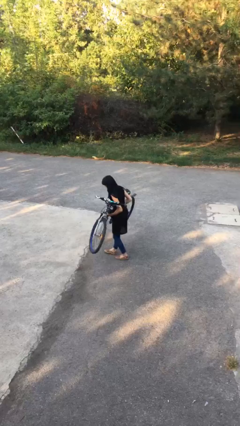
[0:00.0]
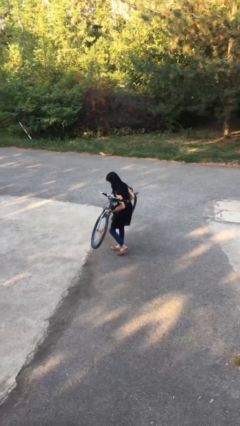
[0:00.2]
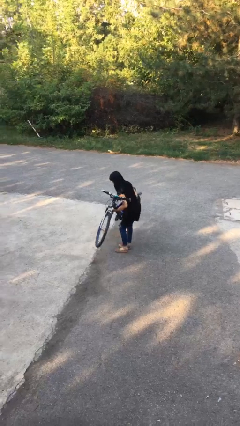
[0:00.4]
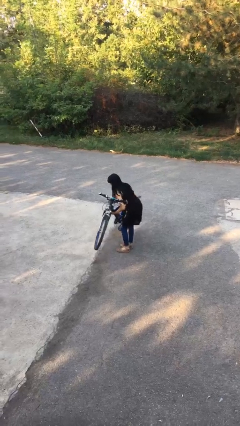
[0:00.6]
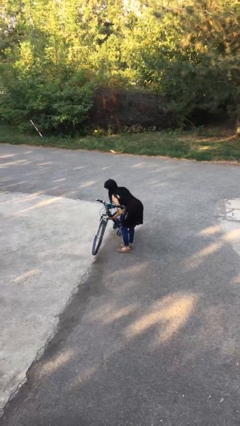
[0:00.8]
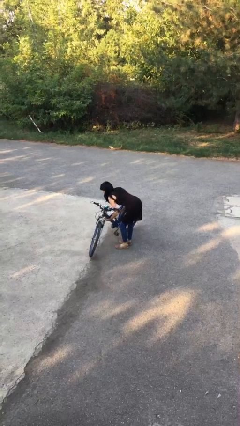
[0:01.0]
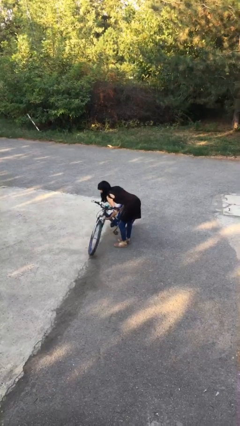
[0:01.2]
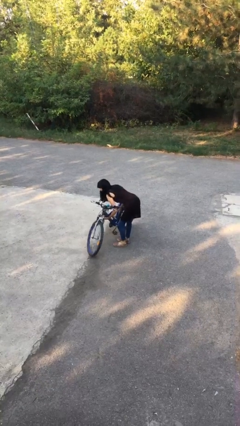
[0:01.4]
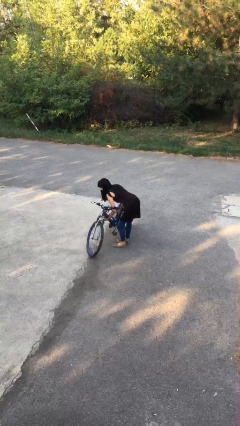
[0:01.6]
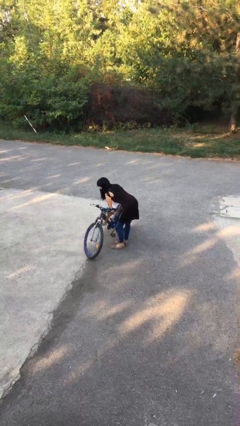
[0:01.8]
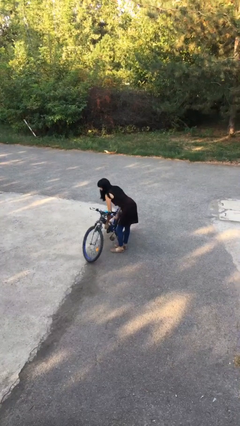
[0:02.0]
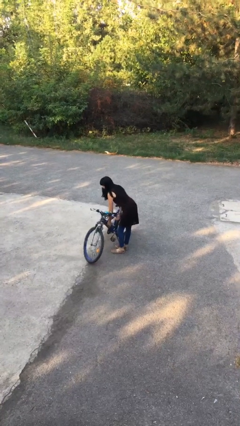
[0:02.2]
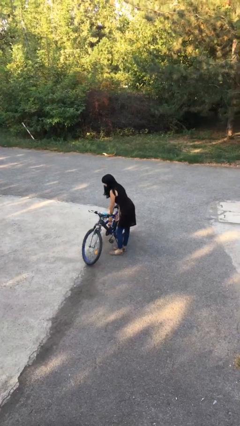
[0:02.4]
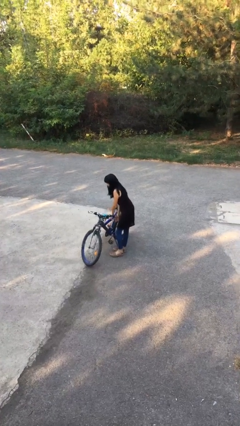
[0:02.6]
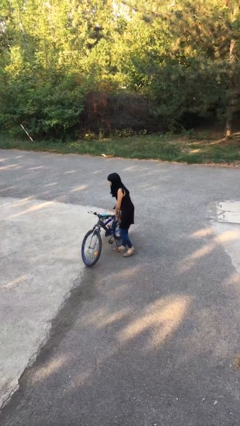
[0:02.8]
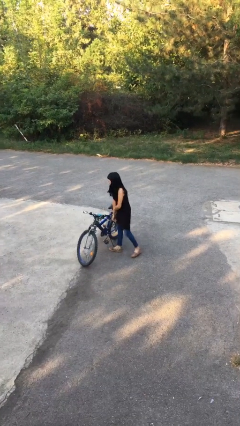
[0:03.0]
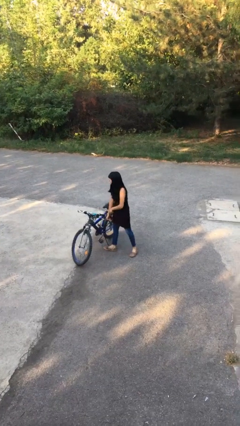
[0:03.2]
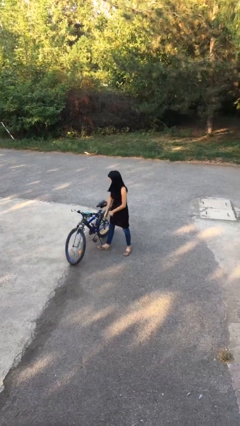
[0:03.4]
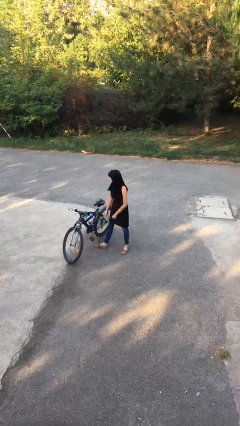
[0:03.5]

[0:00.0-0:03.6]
person puts down object on floor

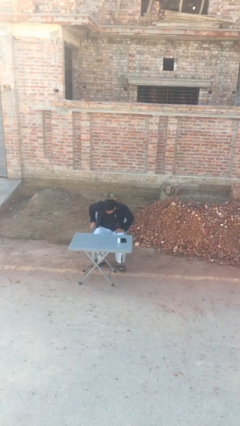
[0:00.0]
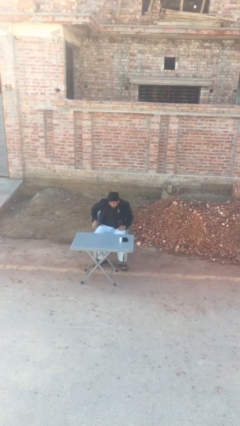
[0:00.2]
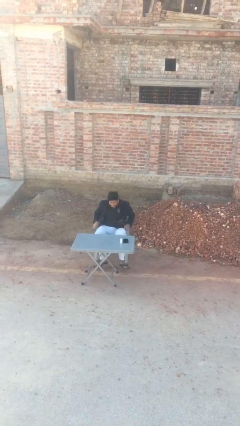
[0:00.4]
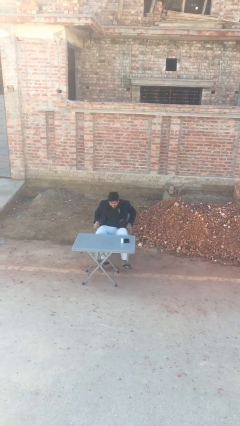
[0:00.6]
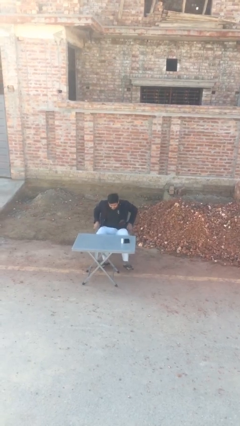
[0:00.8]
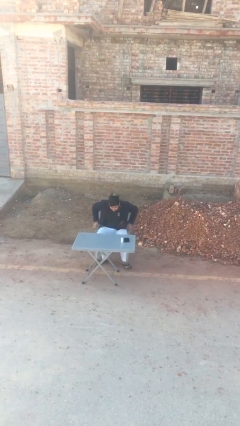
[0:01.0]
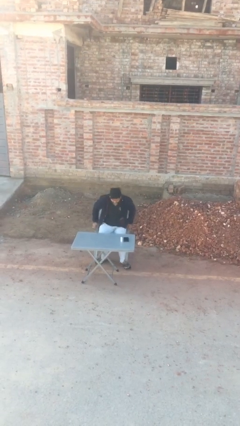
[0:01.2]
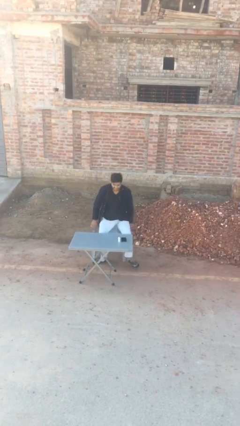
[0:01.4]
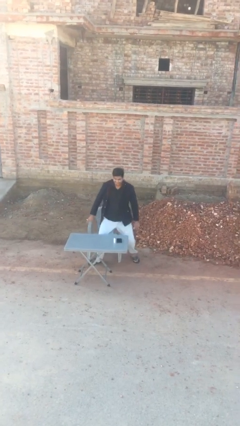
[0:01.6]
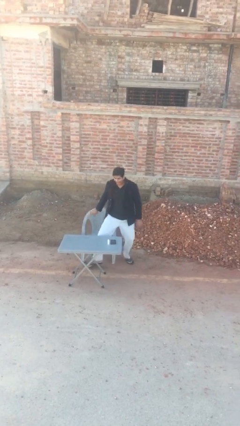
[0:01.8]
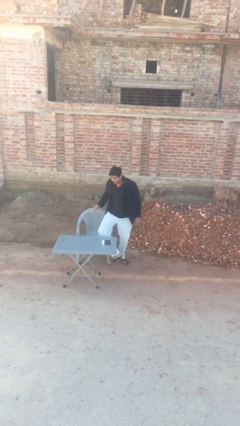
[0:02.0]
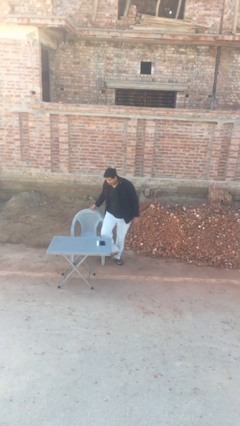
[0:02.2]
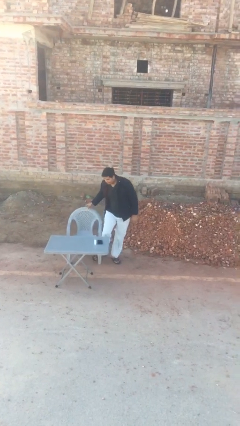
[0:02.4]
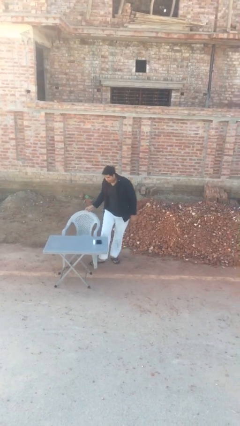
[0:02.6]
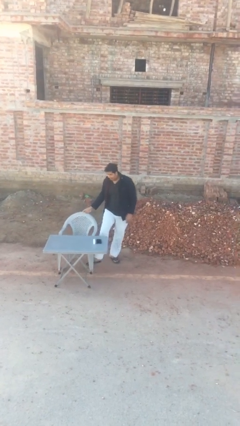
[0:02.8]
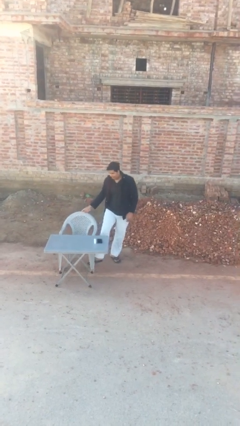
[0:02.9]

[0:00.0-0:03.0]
person stands up

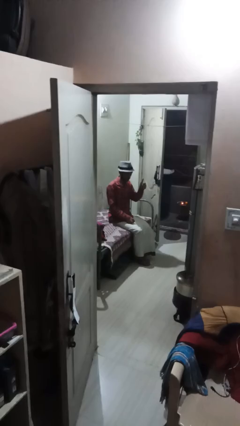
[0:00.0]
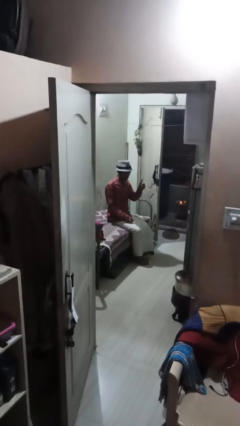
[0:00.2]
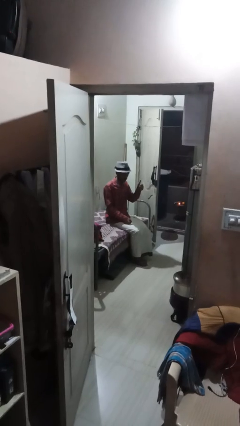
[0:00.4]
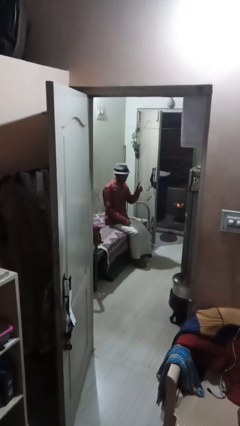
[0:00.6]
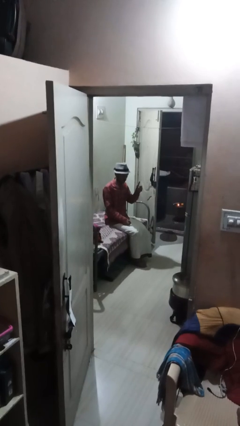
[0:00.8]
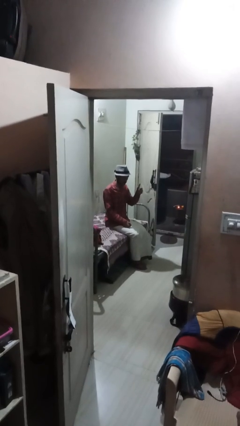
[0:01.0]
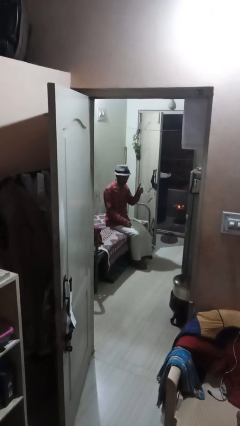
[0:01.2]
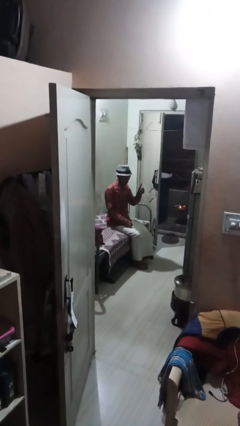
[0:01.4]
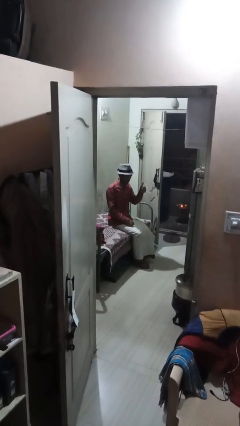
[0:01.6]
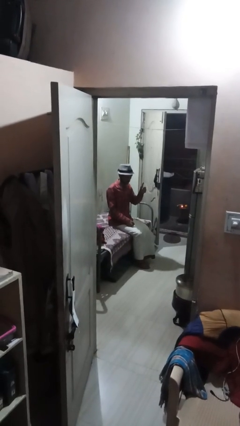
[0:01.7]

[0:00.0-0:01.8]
person gestures thumbs up

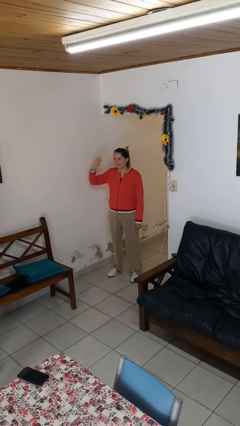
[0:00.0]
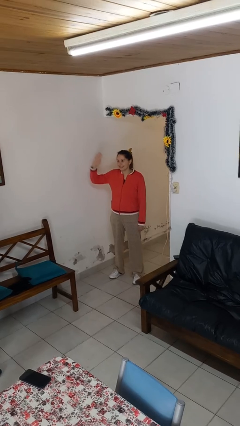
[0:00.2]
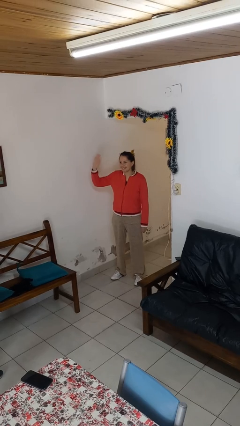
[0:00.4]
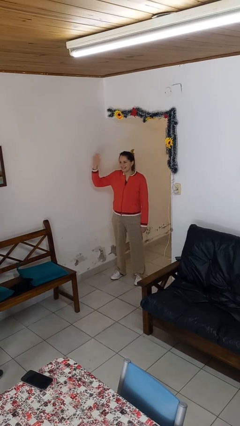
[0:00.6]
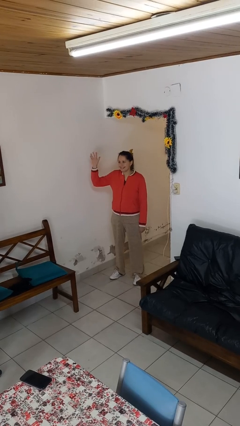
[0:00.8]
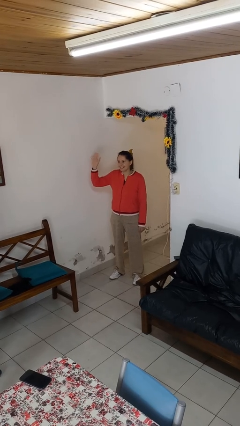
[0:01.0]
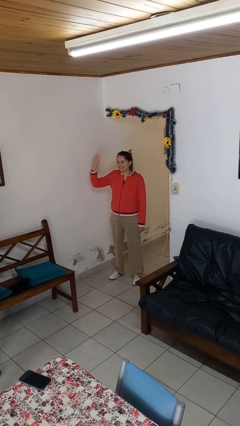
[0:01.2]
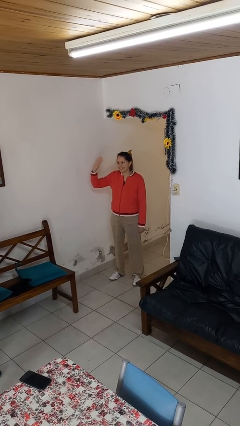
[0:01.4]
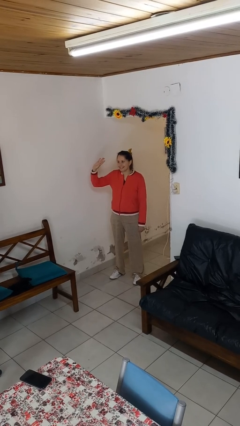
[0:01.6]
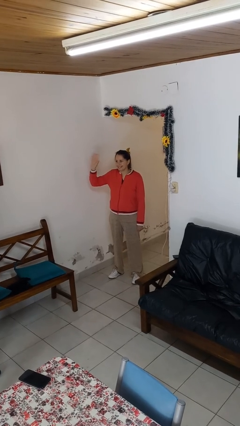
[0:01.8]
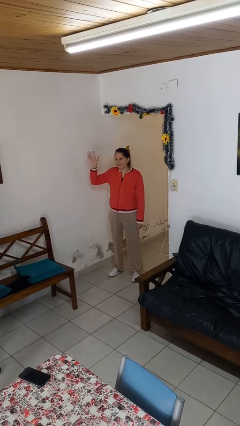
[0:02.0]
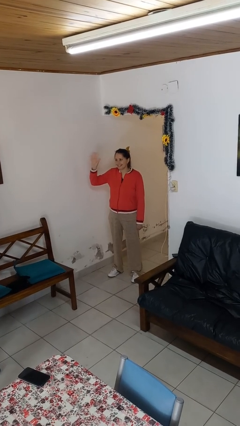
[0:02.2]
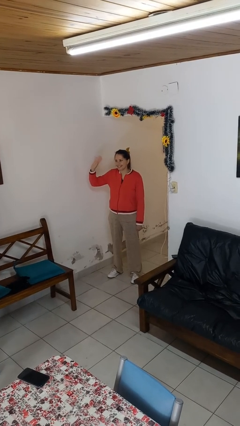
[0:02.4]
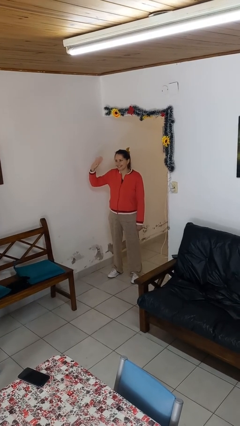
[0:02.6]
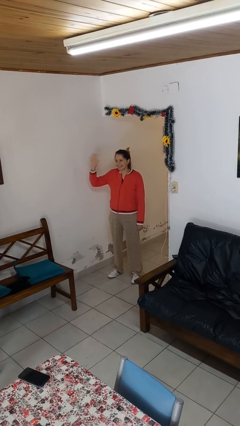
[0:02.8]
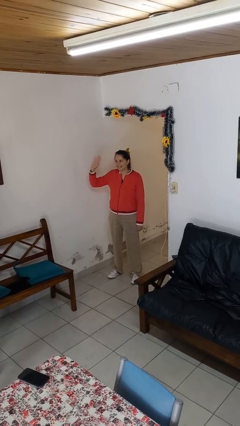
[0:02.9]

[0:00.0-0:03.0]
person waves at person

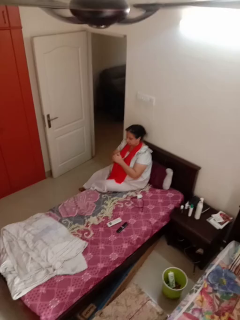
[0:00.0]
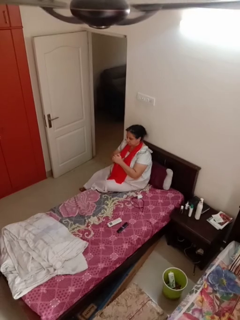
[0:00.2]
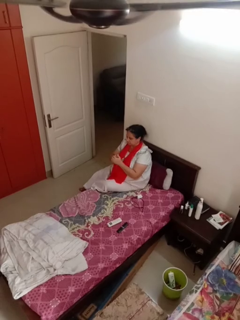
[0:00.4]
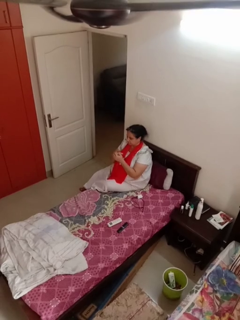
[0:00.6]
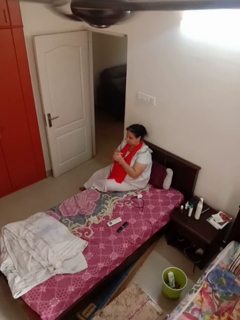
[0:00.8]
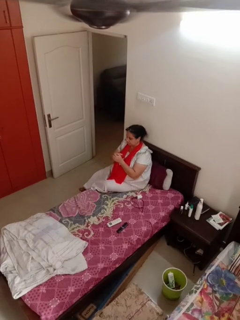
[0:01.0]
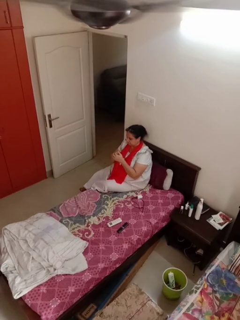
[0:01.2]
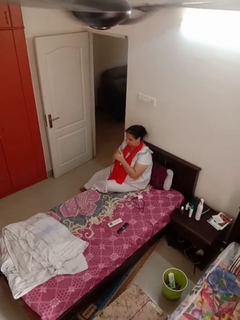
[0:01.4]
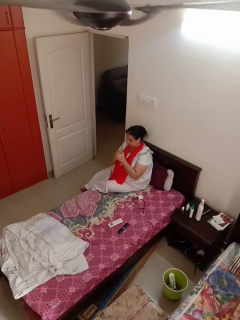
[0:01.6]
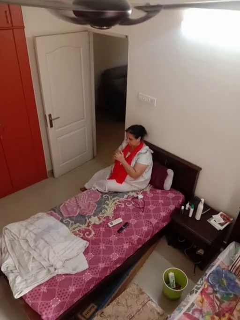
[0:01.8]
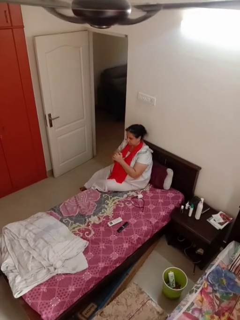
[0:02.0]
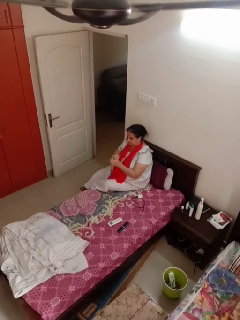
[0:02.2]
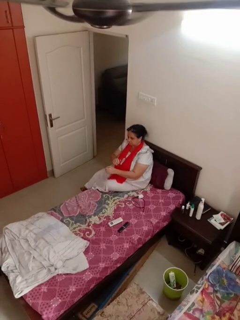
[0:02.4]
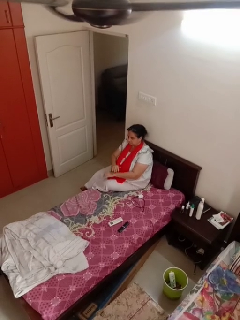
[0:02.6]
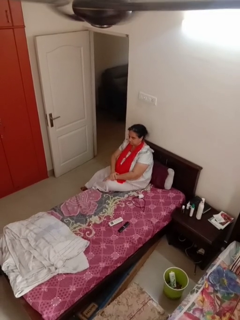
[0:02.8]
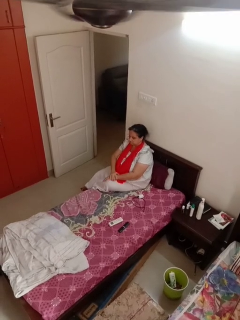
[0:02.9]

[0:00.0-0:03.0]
person cracks knuckles

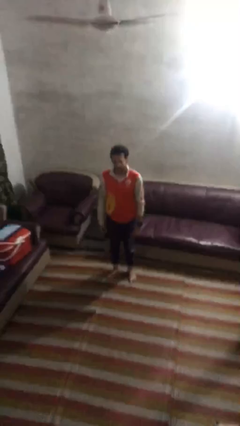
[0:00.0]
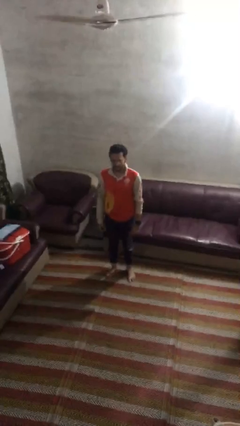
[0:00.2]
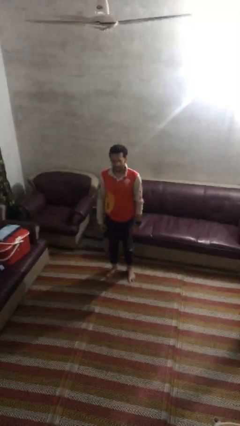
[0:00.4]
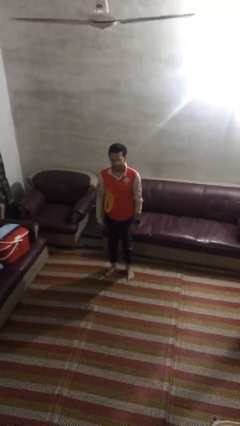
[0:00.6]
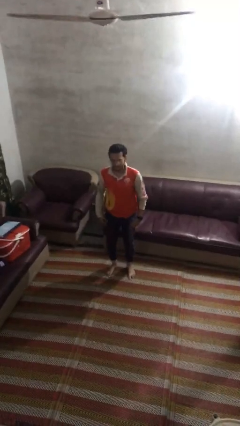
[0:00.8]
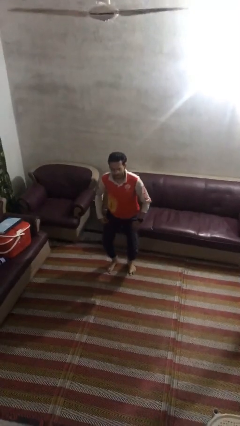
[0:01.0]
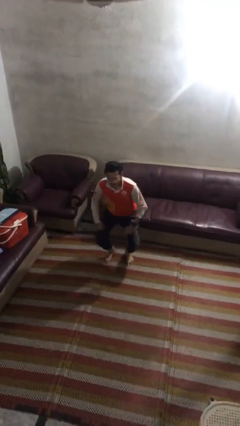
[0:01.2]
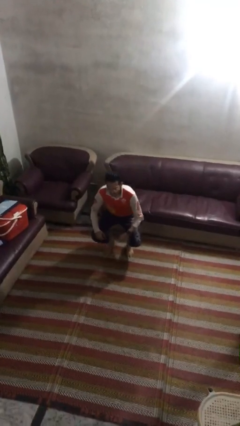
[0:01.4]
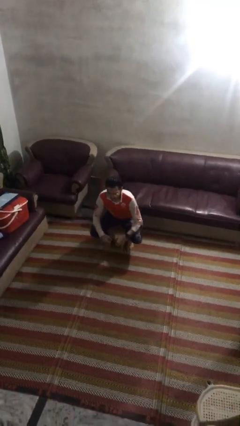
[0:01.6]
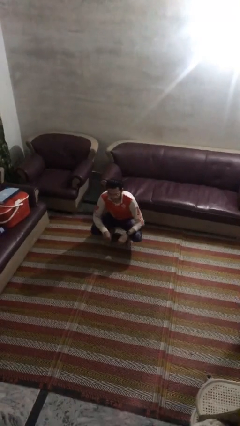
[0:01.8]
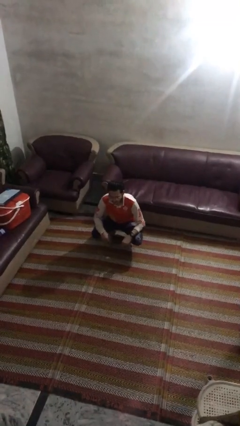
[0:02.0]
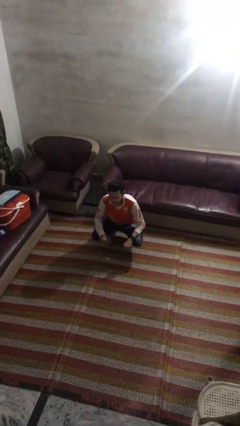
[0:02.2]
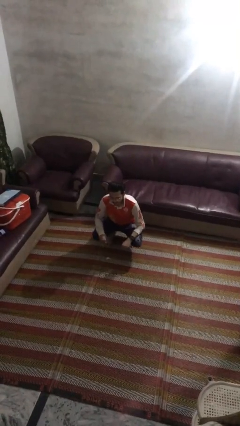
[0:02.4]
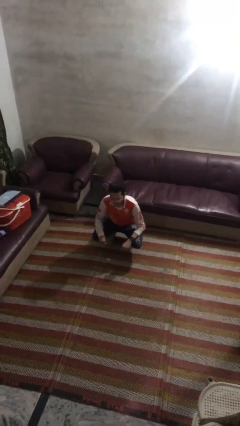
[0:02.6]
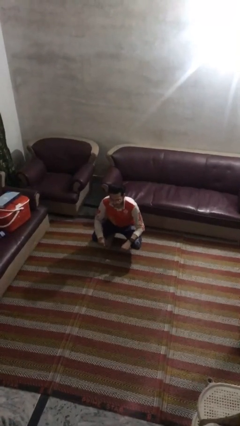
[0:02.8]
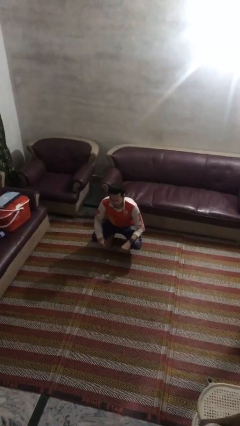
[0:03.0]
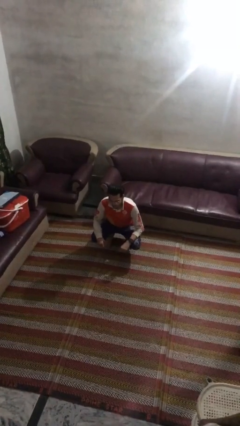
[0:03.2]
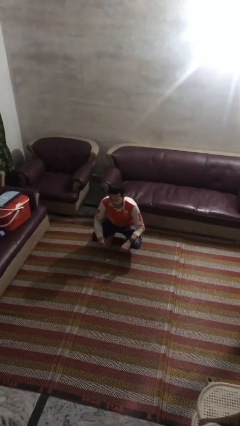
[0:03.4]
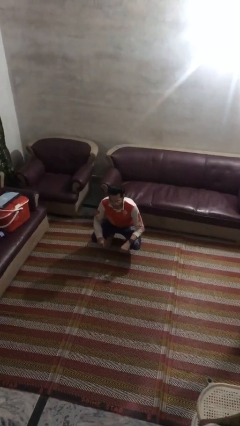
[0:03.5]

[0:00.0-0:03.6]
person squats
